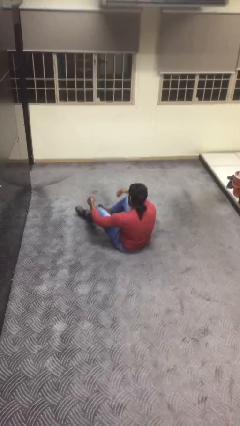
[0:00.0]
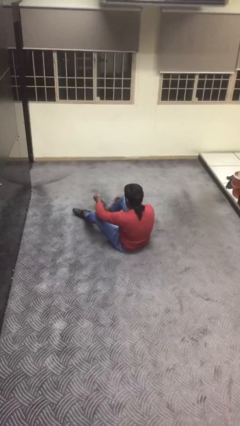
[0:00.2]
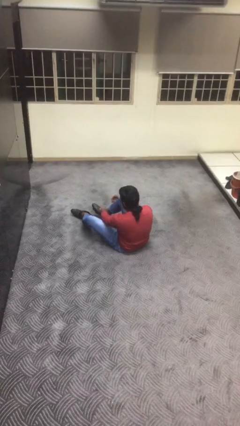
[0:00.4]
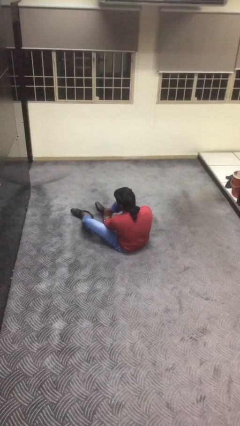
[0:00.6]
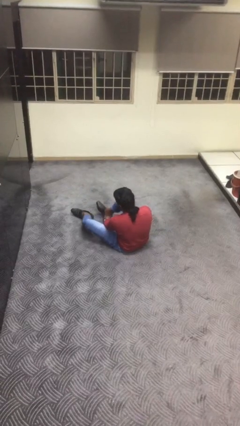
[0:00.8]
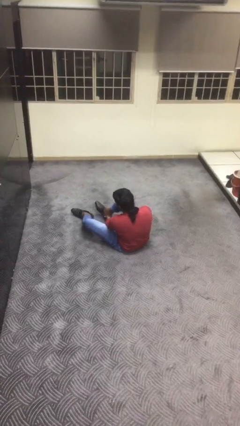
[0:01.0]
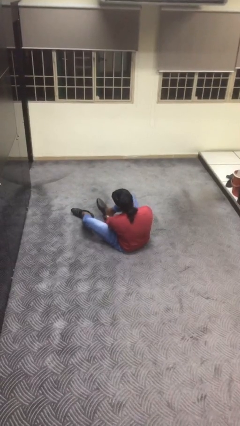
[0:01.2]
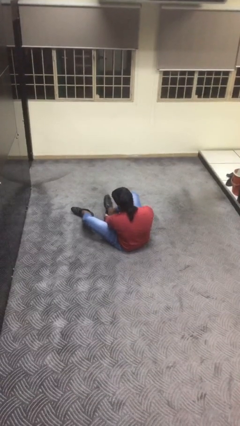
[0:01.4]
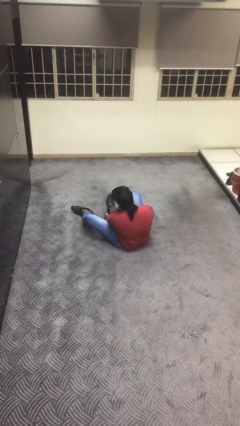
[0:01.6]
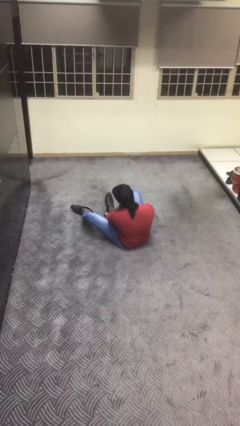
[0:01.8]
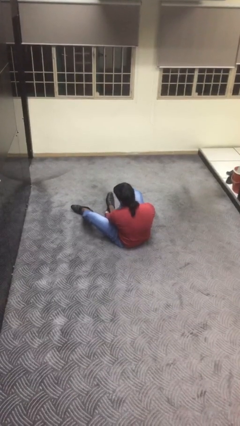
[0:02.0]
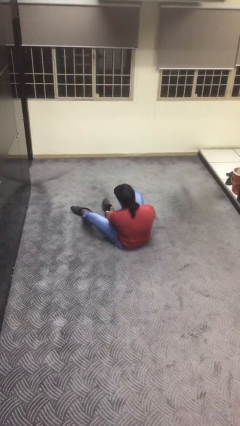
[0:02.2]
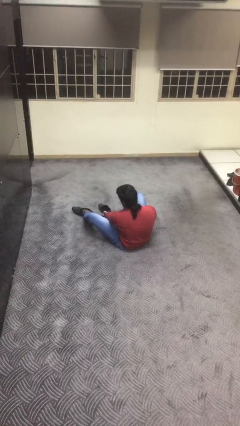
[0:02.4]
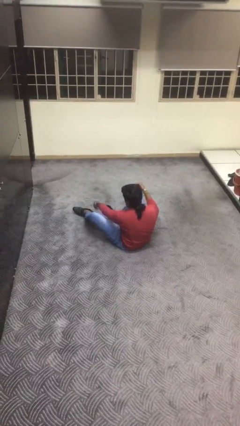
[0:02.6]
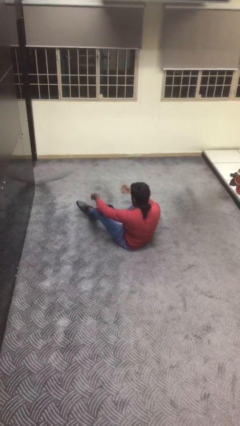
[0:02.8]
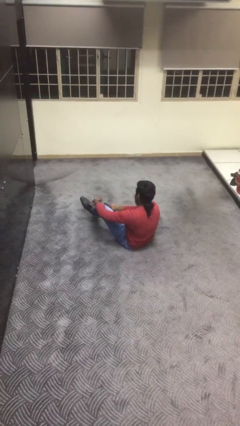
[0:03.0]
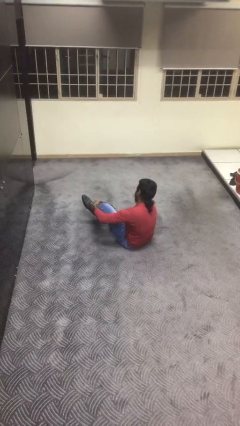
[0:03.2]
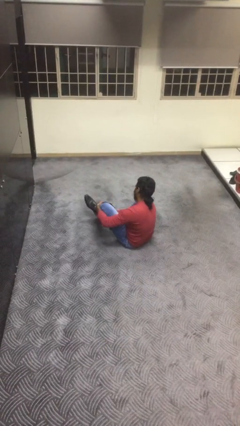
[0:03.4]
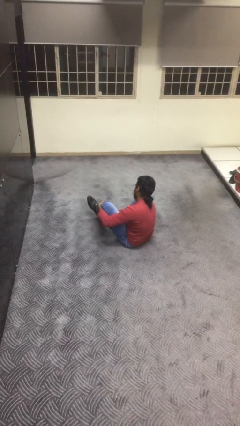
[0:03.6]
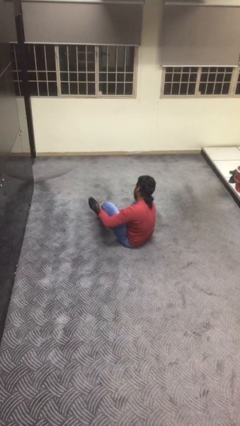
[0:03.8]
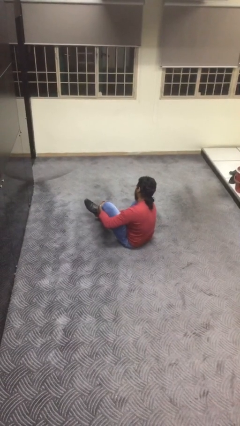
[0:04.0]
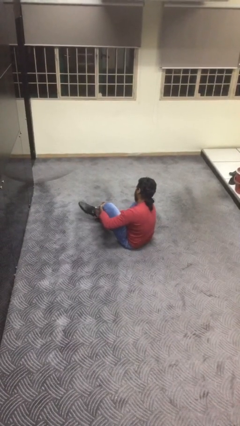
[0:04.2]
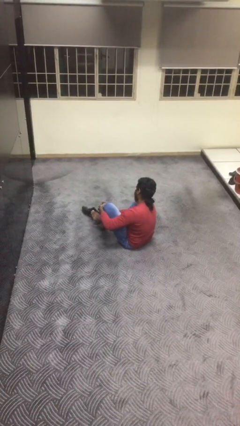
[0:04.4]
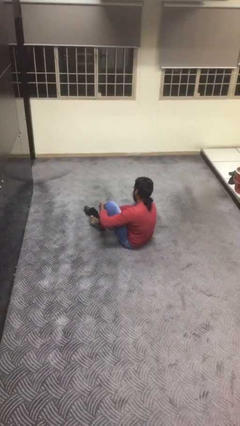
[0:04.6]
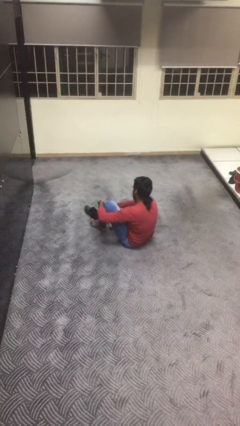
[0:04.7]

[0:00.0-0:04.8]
person takes off shoes

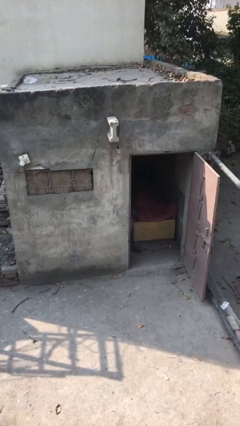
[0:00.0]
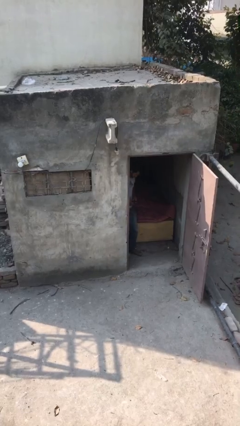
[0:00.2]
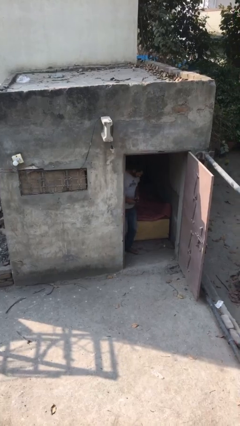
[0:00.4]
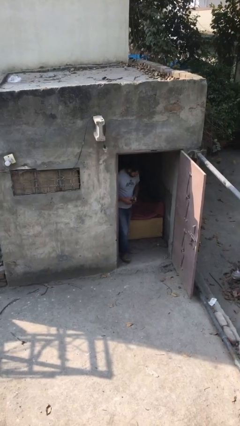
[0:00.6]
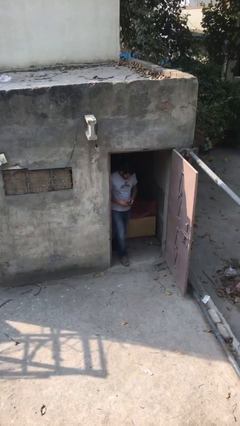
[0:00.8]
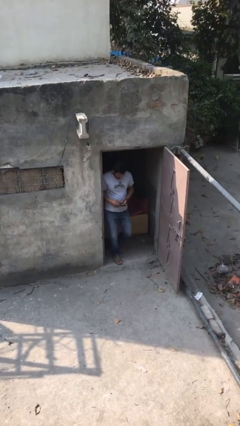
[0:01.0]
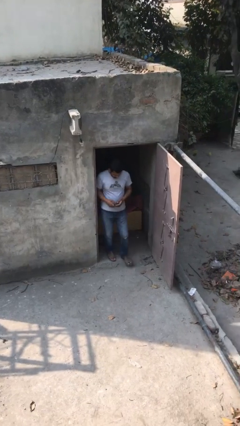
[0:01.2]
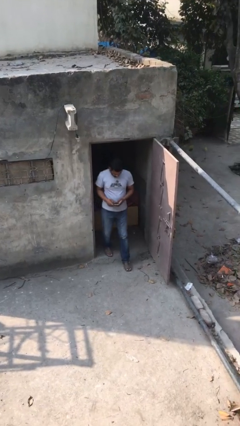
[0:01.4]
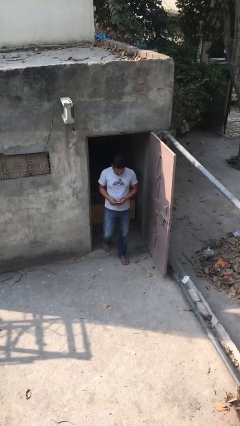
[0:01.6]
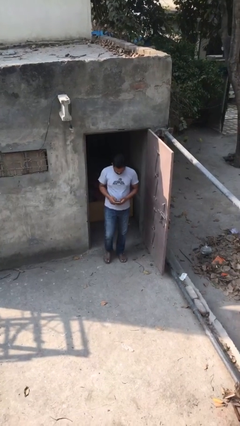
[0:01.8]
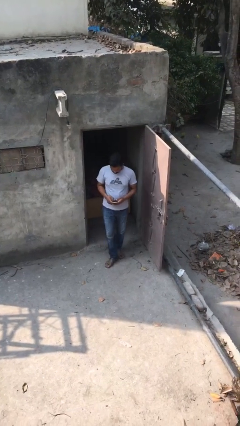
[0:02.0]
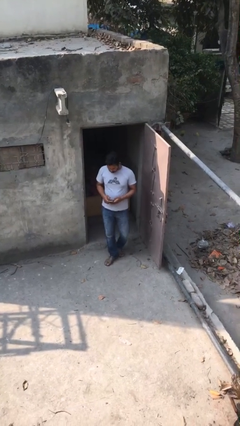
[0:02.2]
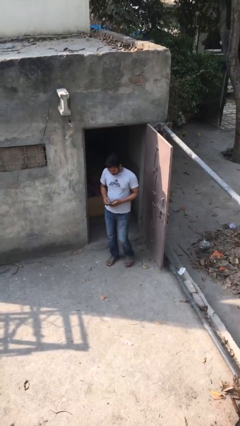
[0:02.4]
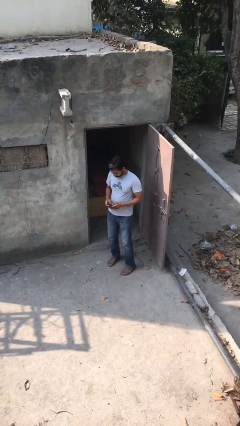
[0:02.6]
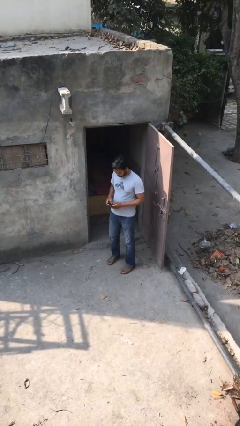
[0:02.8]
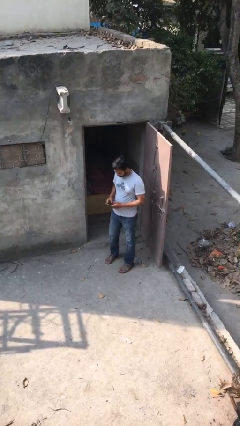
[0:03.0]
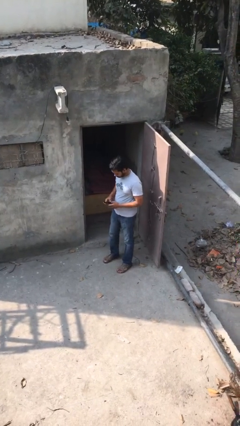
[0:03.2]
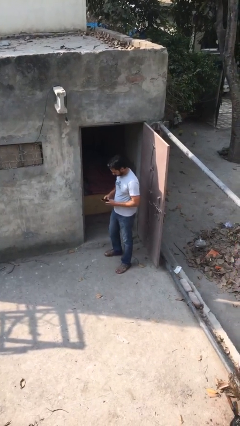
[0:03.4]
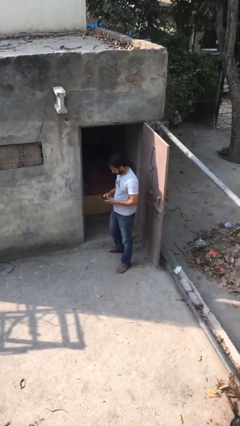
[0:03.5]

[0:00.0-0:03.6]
person enters scene through structure

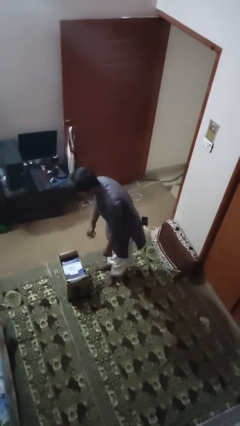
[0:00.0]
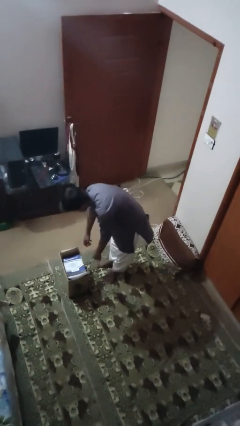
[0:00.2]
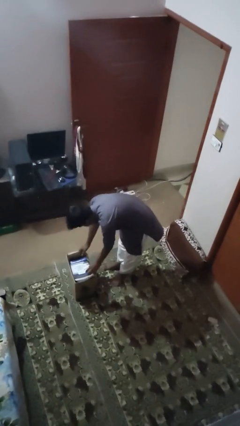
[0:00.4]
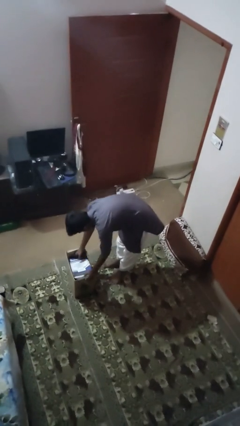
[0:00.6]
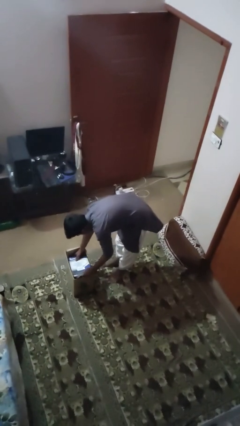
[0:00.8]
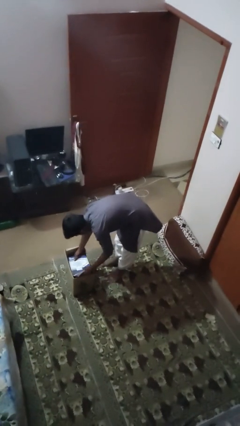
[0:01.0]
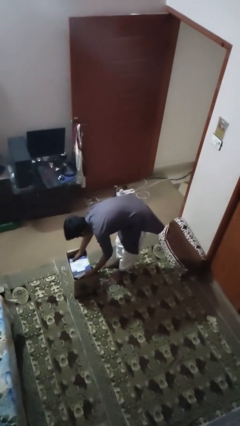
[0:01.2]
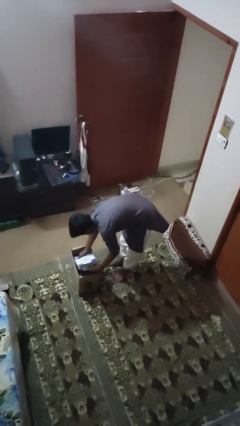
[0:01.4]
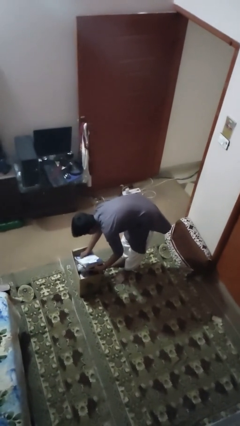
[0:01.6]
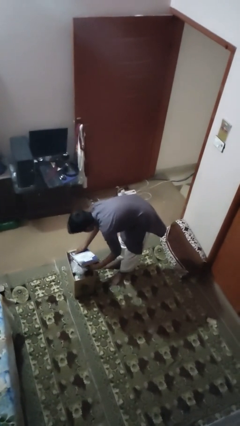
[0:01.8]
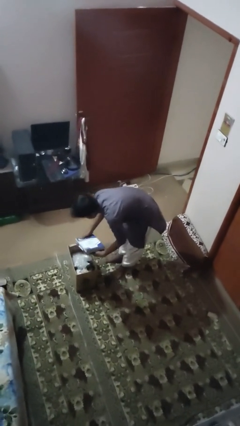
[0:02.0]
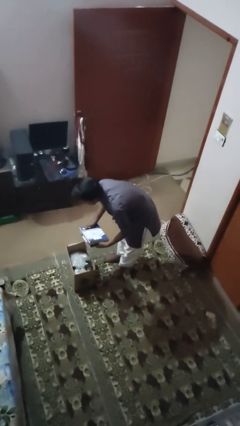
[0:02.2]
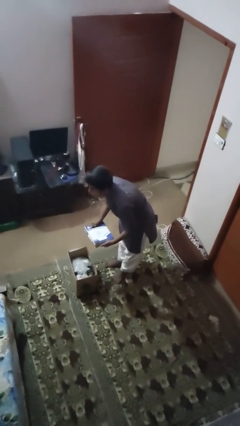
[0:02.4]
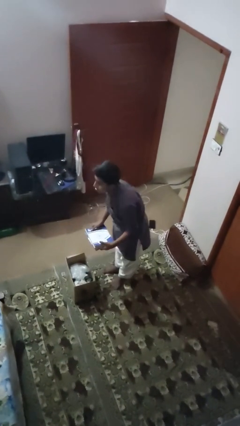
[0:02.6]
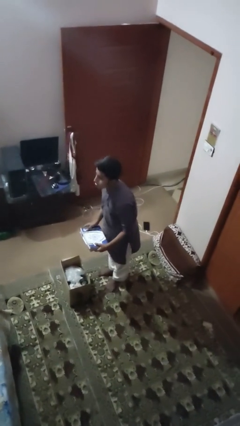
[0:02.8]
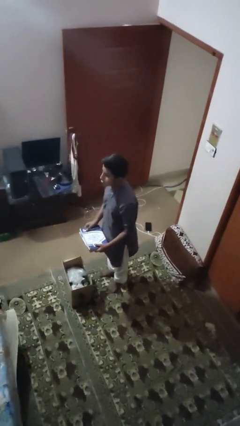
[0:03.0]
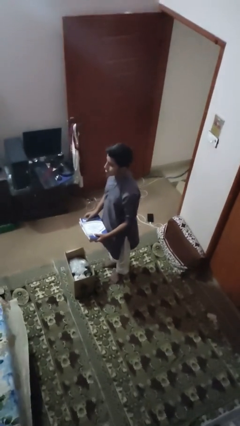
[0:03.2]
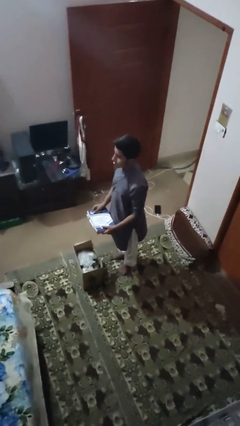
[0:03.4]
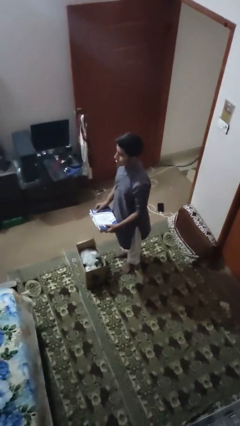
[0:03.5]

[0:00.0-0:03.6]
person takes object from box

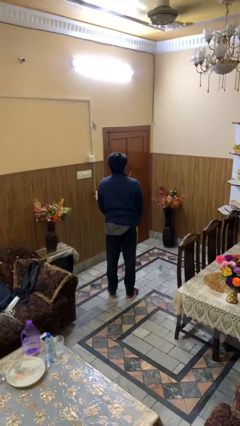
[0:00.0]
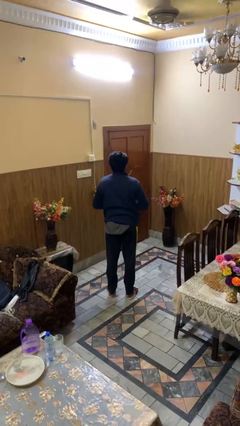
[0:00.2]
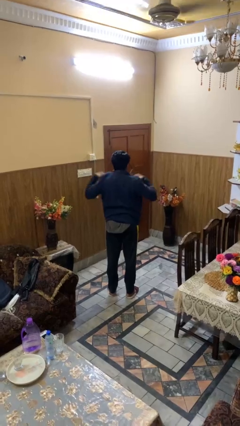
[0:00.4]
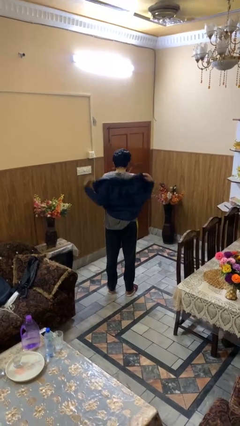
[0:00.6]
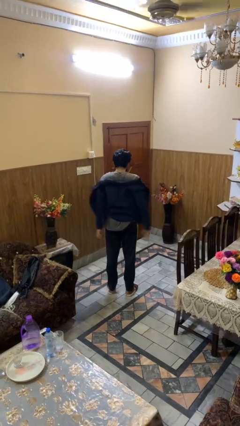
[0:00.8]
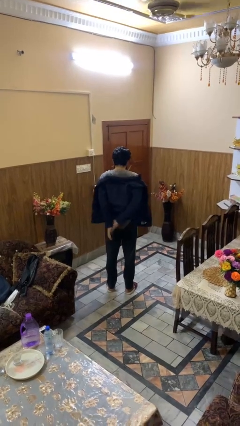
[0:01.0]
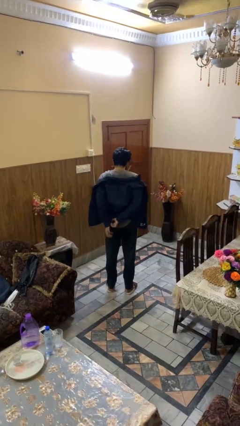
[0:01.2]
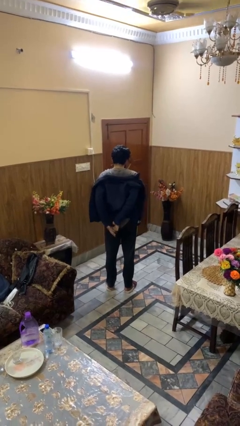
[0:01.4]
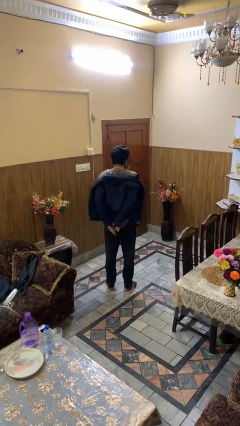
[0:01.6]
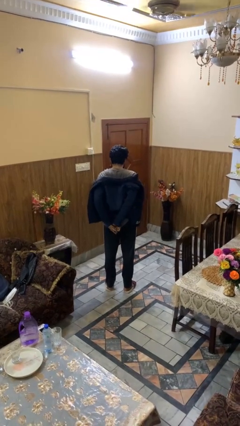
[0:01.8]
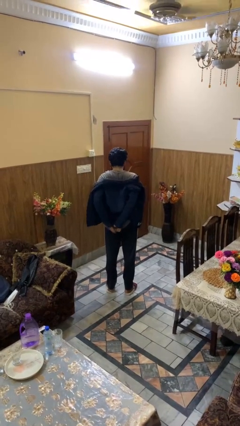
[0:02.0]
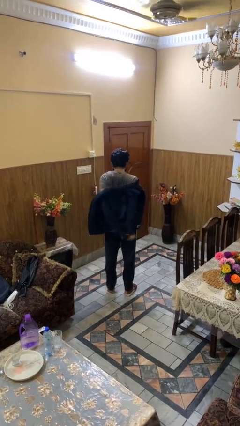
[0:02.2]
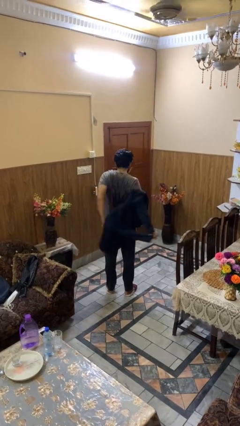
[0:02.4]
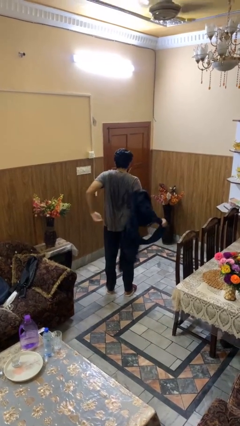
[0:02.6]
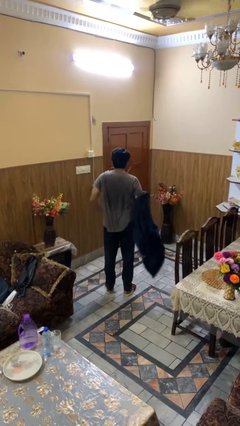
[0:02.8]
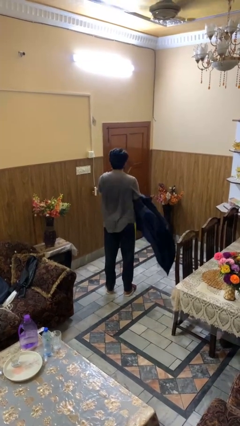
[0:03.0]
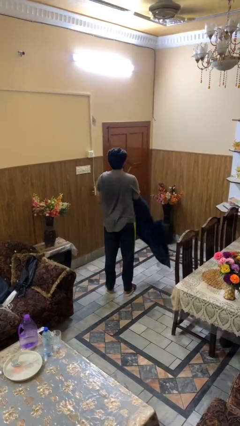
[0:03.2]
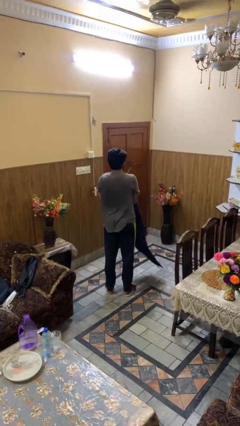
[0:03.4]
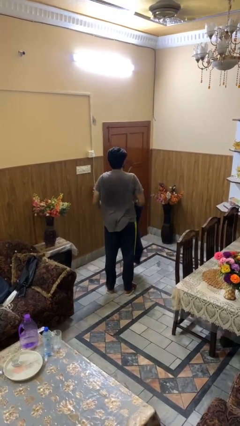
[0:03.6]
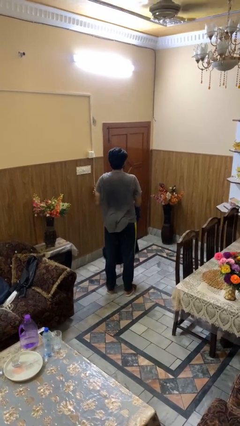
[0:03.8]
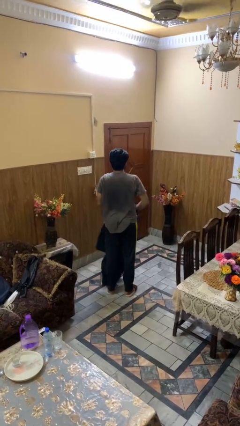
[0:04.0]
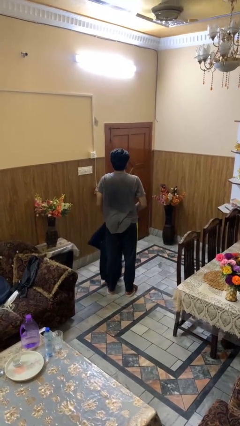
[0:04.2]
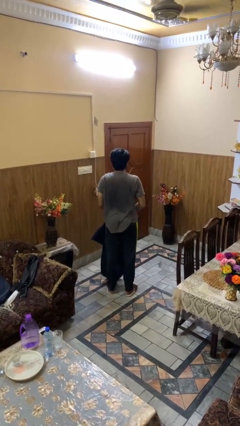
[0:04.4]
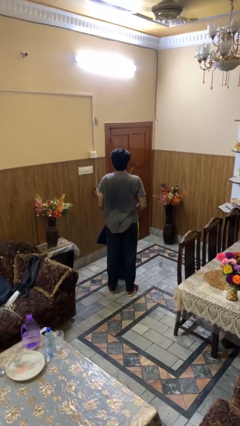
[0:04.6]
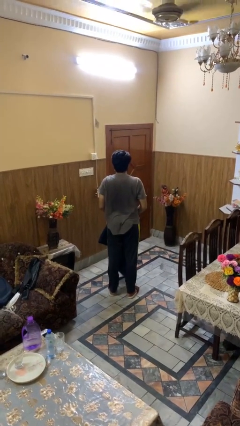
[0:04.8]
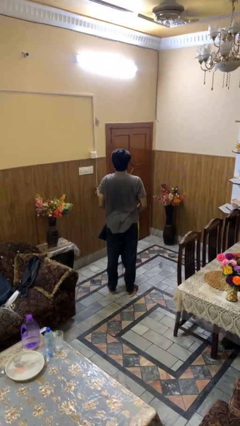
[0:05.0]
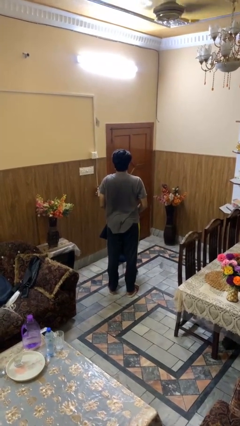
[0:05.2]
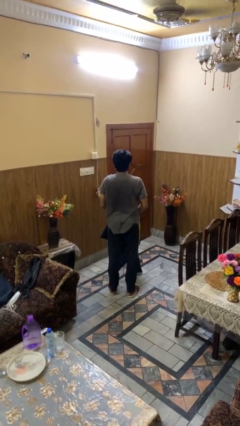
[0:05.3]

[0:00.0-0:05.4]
person takes off jacket
